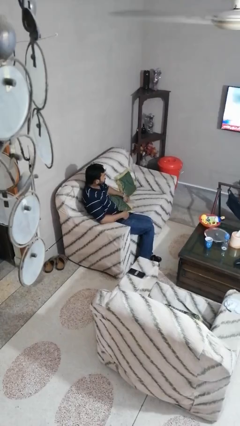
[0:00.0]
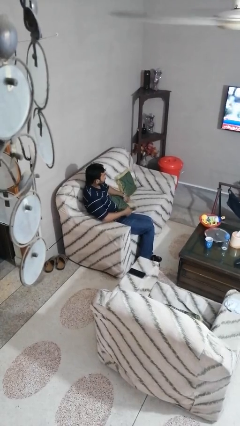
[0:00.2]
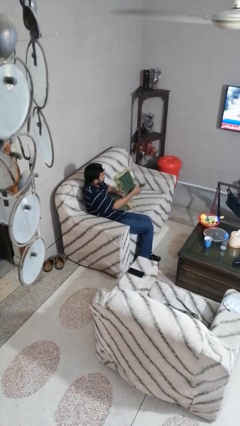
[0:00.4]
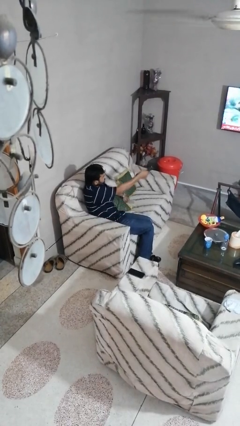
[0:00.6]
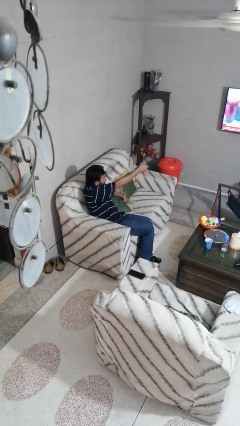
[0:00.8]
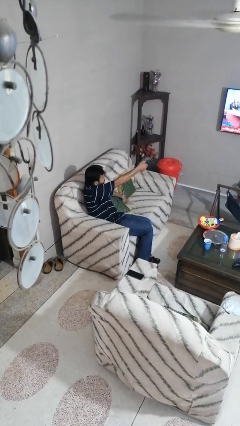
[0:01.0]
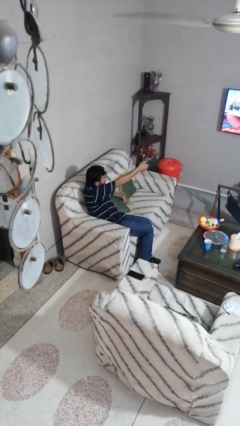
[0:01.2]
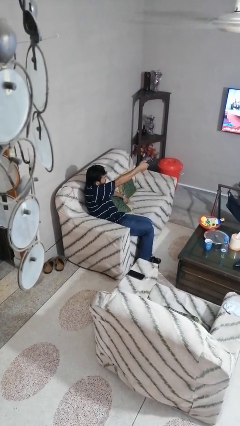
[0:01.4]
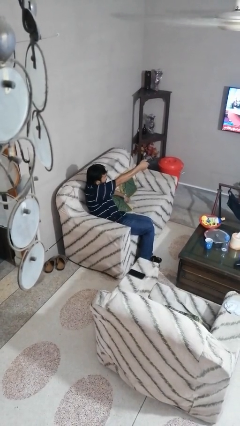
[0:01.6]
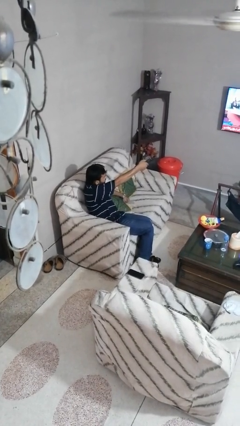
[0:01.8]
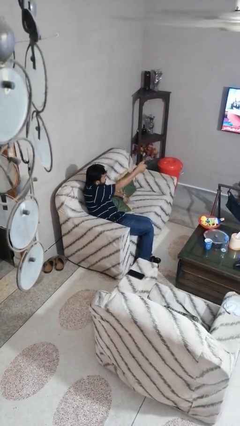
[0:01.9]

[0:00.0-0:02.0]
person uses television remote

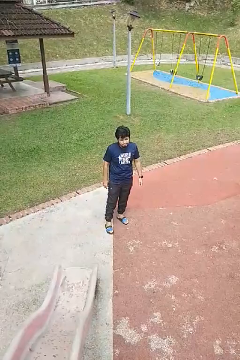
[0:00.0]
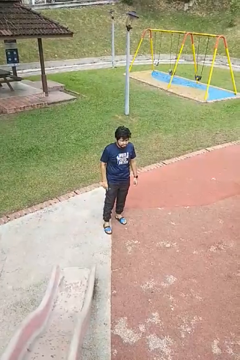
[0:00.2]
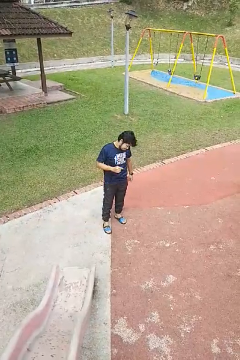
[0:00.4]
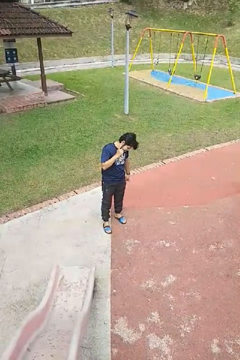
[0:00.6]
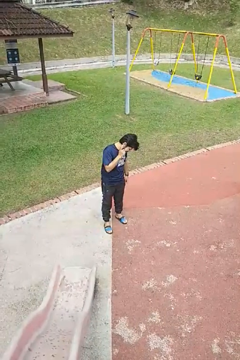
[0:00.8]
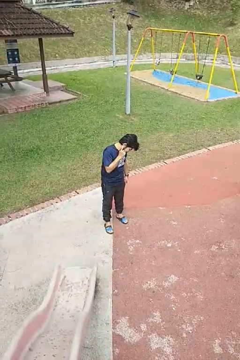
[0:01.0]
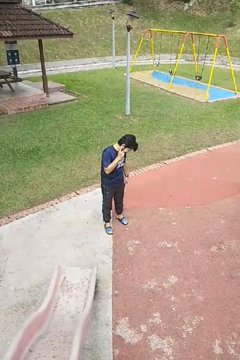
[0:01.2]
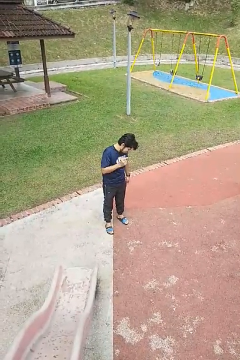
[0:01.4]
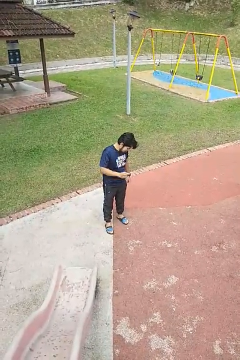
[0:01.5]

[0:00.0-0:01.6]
person gestures listen closely

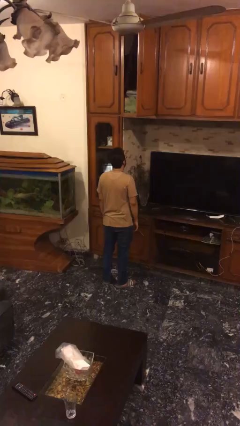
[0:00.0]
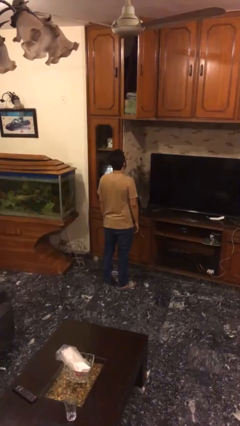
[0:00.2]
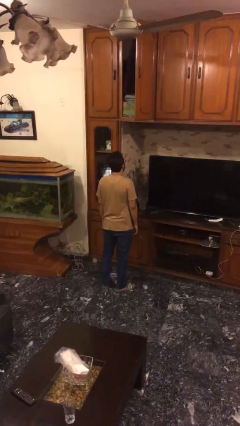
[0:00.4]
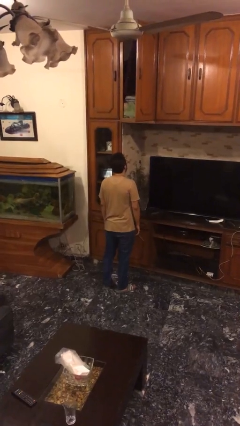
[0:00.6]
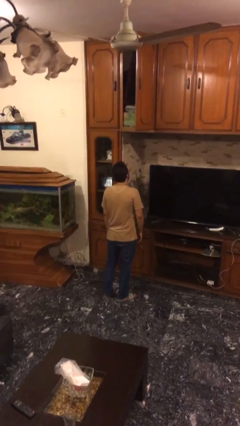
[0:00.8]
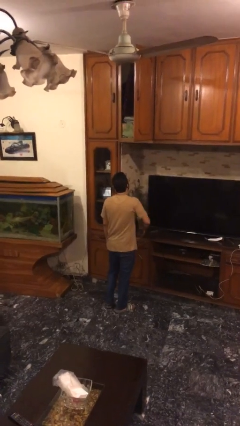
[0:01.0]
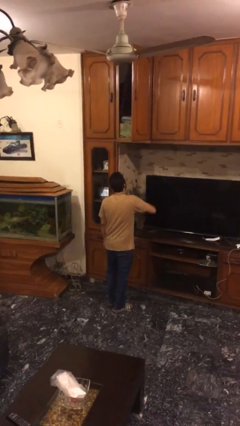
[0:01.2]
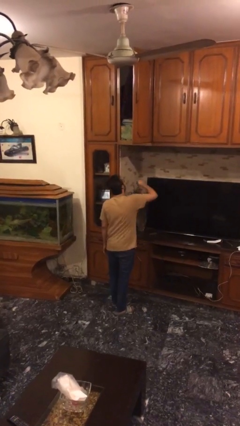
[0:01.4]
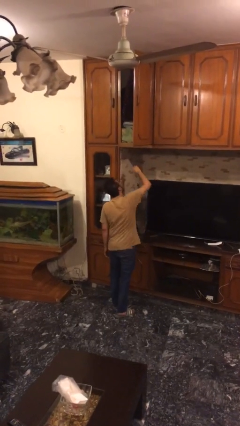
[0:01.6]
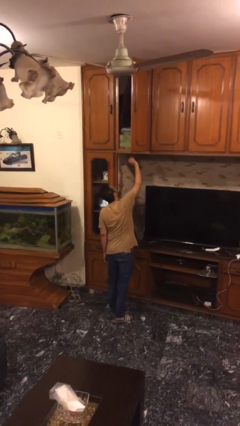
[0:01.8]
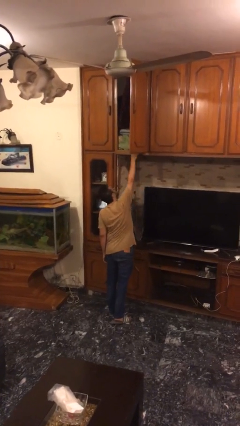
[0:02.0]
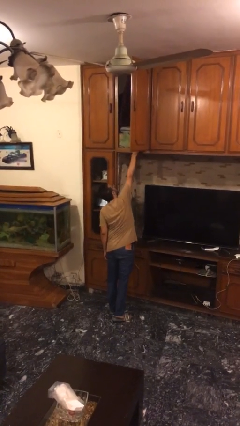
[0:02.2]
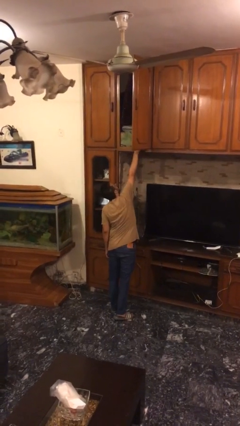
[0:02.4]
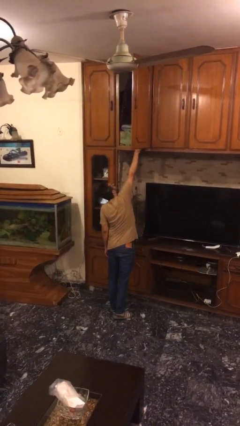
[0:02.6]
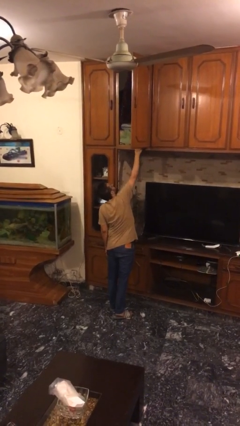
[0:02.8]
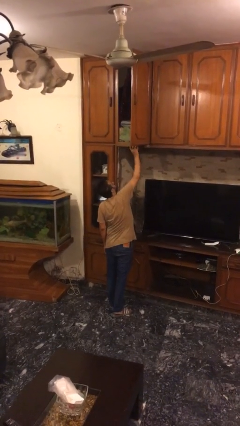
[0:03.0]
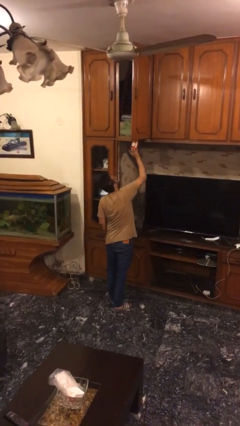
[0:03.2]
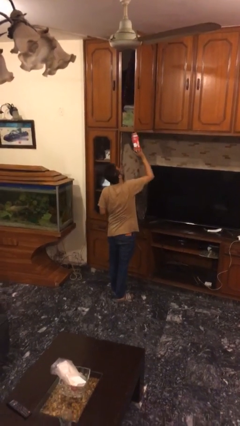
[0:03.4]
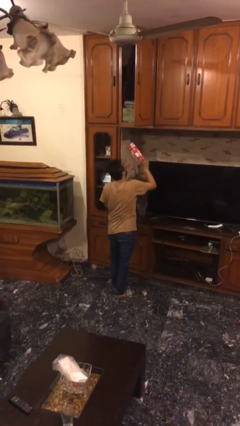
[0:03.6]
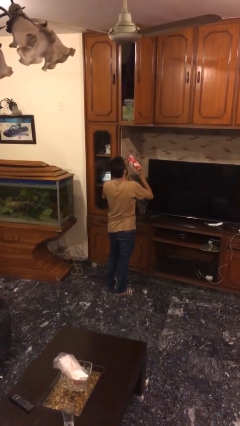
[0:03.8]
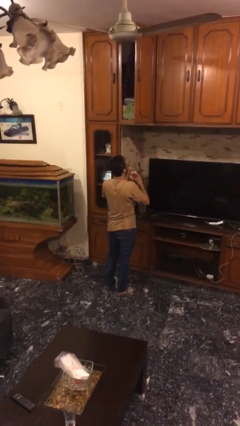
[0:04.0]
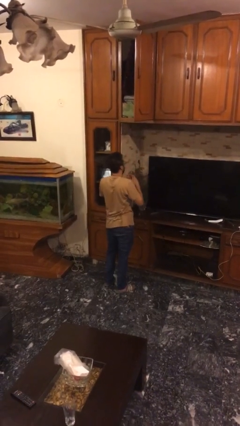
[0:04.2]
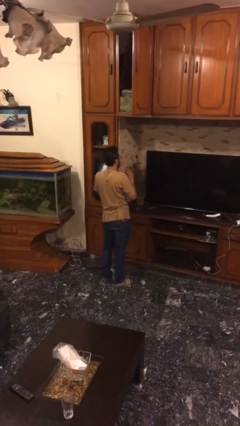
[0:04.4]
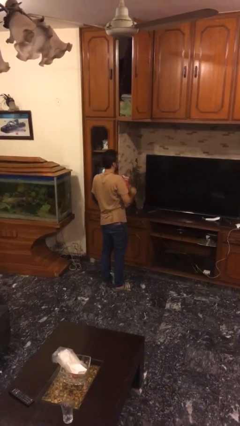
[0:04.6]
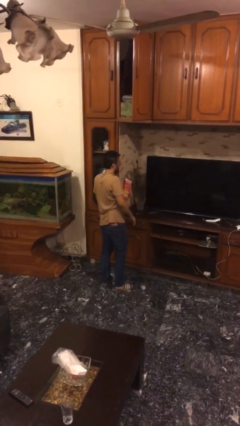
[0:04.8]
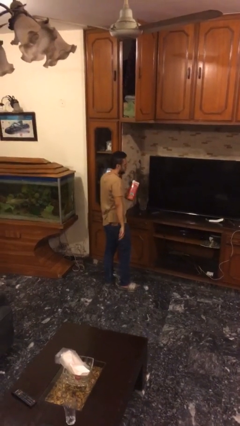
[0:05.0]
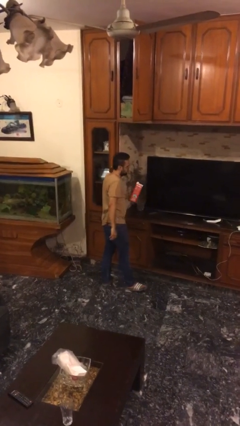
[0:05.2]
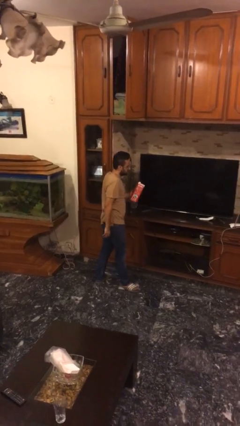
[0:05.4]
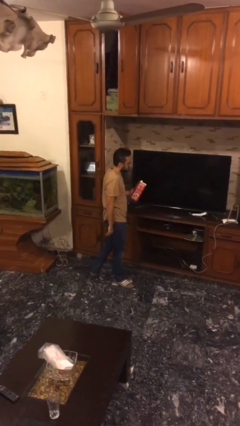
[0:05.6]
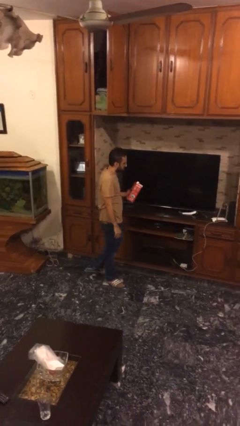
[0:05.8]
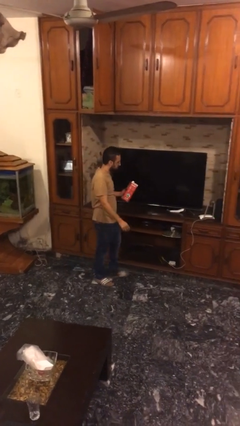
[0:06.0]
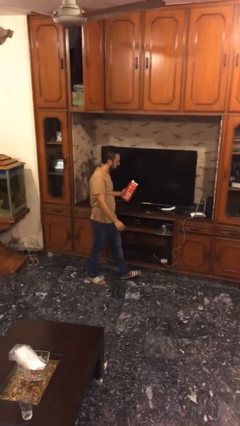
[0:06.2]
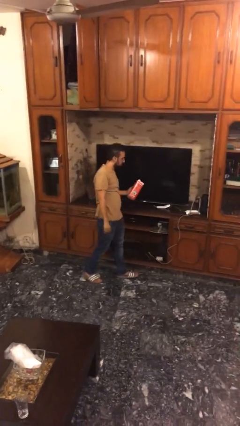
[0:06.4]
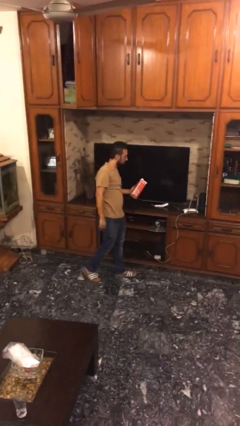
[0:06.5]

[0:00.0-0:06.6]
person picks up object from shelf

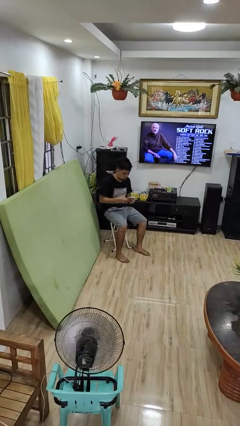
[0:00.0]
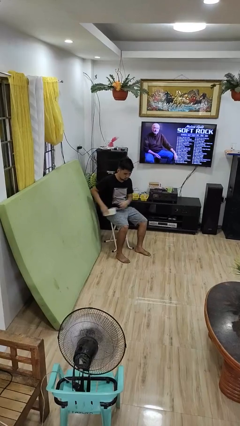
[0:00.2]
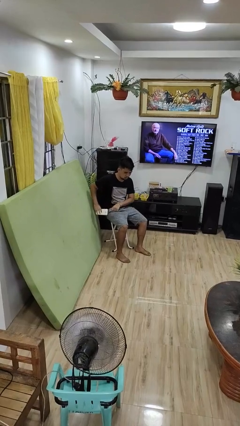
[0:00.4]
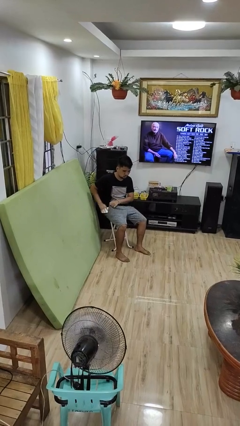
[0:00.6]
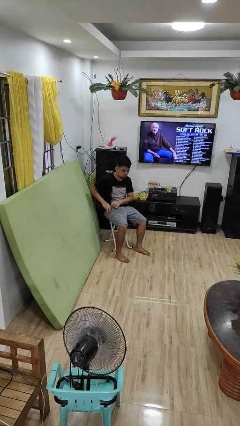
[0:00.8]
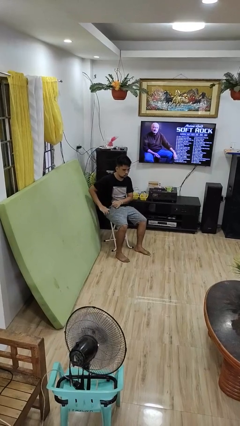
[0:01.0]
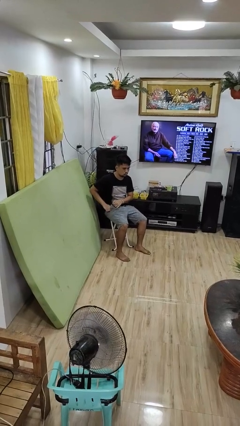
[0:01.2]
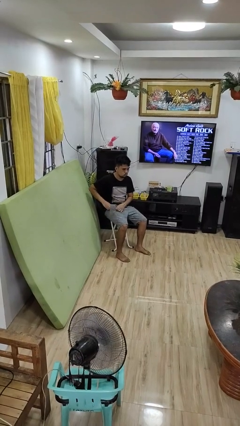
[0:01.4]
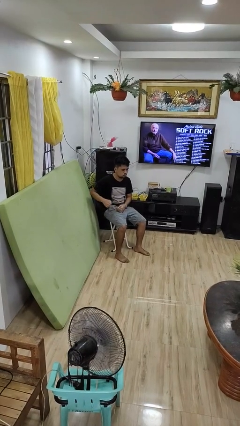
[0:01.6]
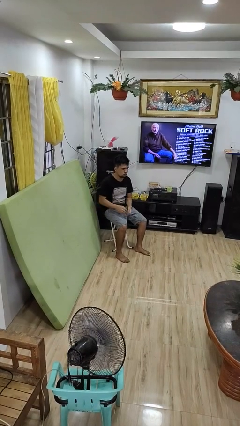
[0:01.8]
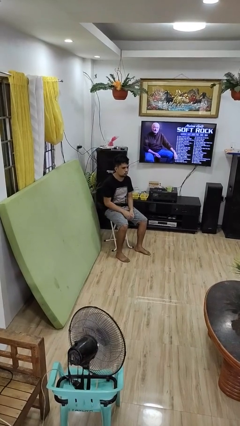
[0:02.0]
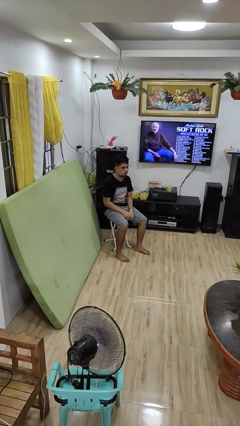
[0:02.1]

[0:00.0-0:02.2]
person puts phone into pocket

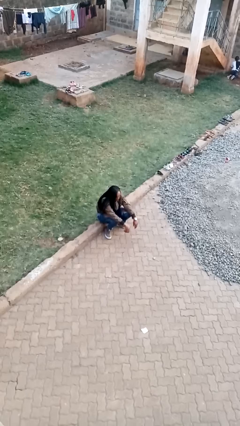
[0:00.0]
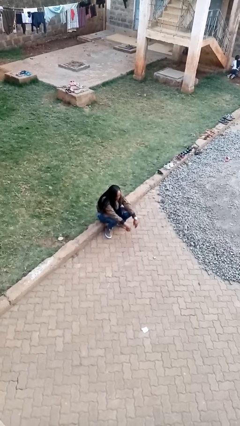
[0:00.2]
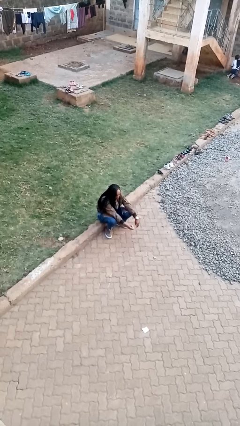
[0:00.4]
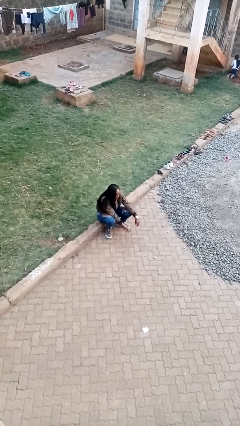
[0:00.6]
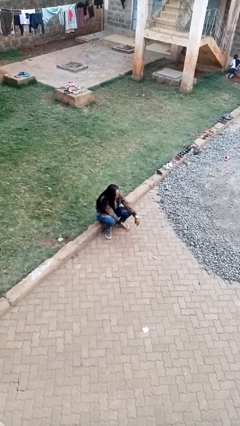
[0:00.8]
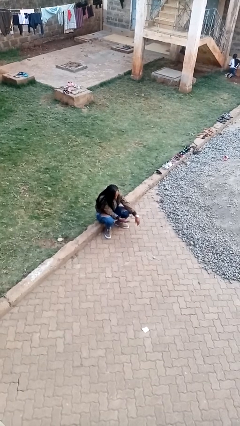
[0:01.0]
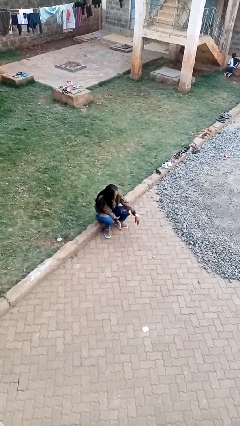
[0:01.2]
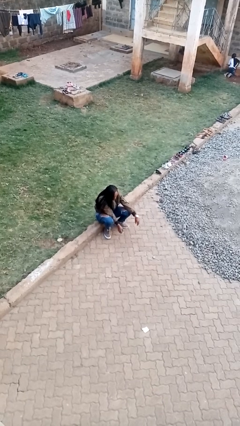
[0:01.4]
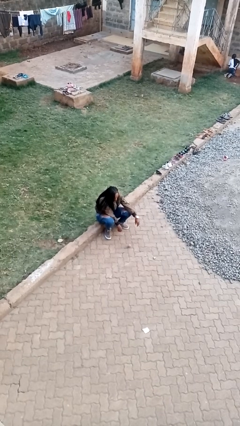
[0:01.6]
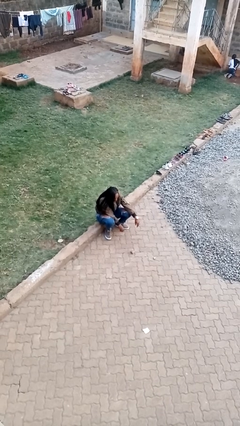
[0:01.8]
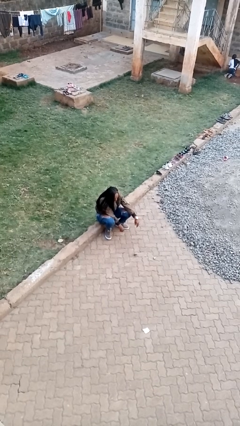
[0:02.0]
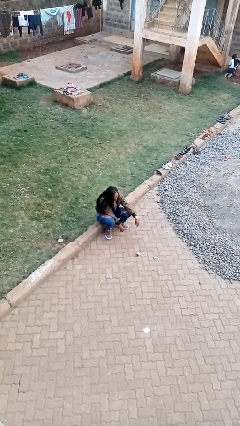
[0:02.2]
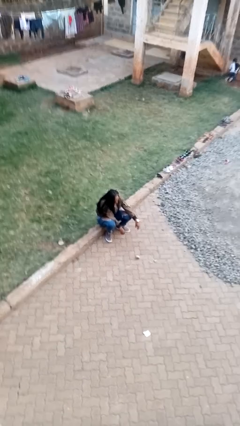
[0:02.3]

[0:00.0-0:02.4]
person throws object into air

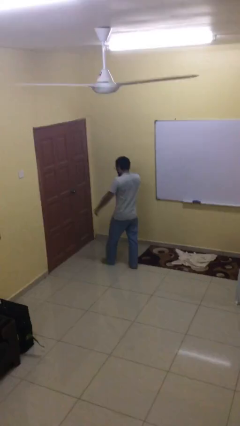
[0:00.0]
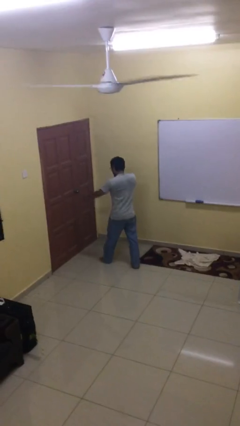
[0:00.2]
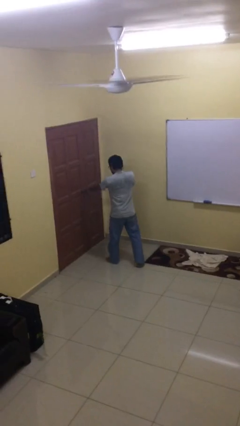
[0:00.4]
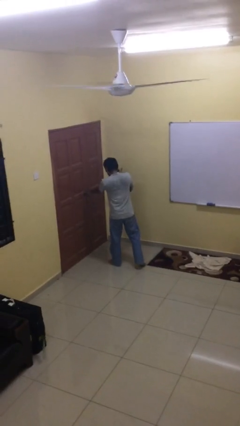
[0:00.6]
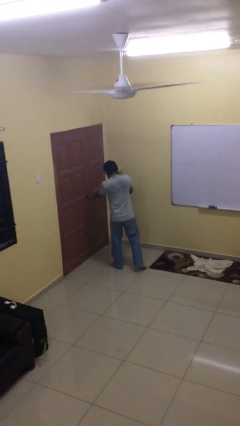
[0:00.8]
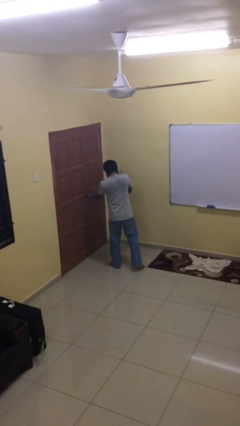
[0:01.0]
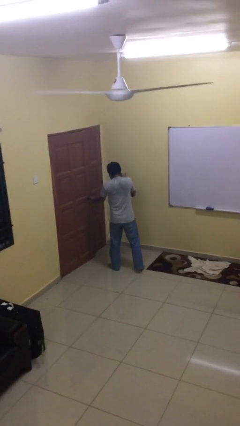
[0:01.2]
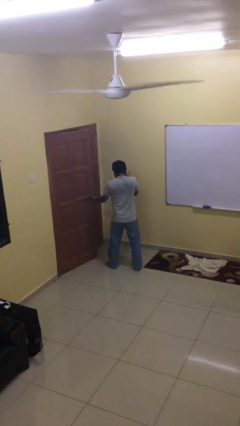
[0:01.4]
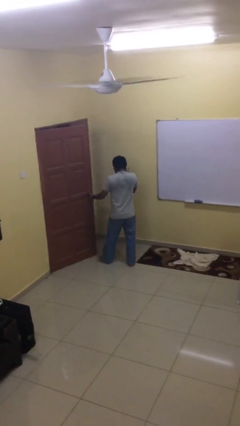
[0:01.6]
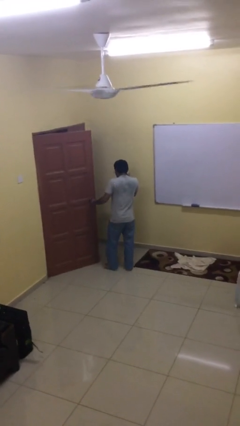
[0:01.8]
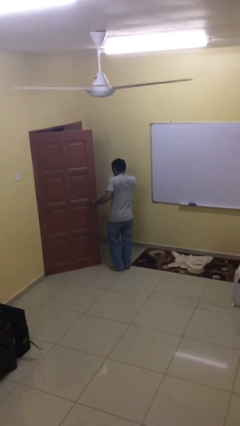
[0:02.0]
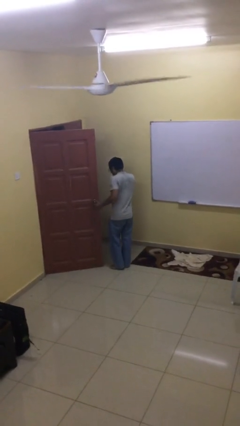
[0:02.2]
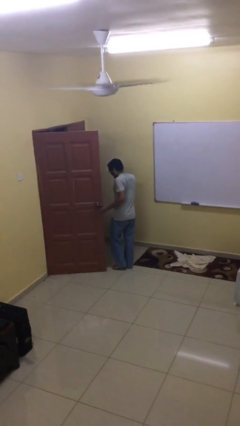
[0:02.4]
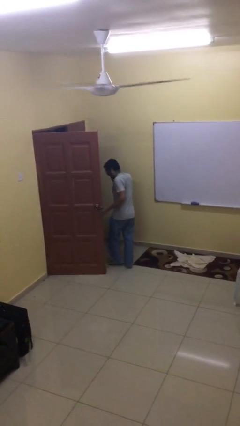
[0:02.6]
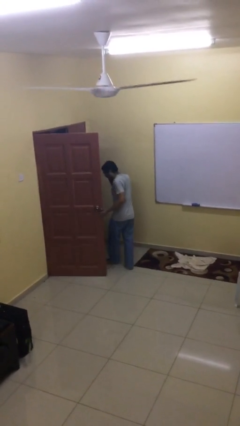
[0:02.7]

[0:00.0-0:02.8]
person opens facility door
